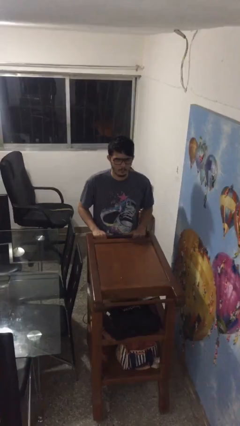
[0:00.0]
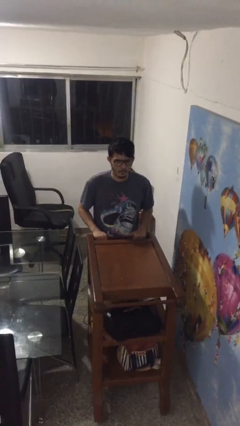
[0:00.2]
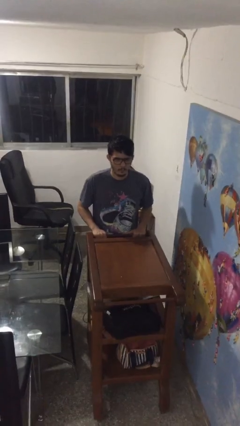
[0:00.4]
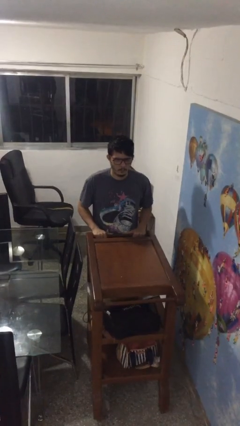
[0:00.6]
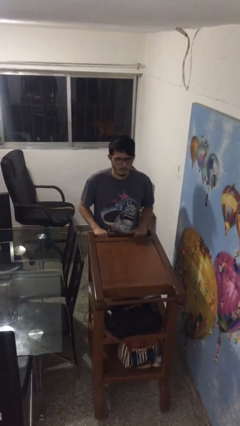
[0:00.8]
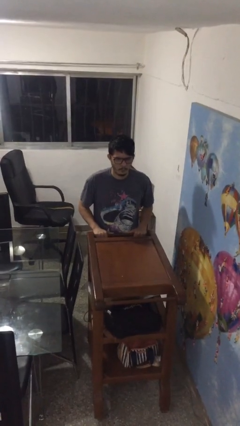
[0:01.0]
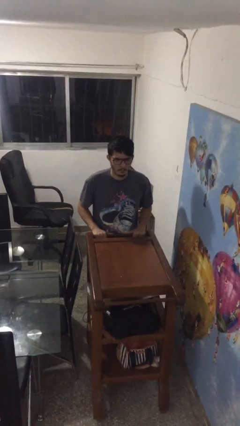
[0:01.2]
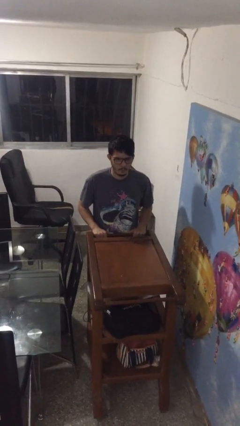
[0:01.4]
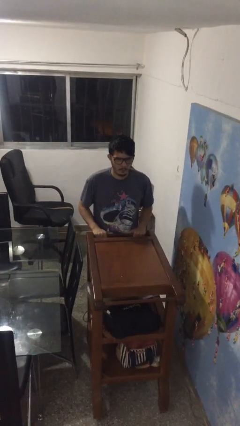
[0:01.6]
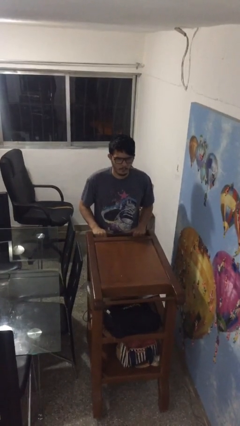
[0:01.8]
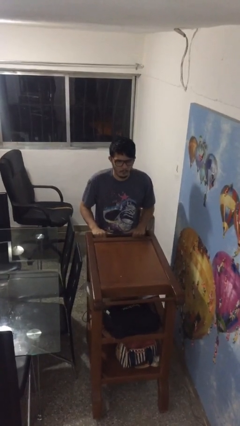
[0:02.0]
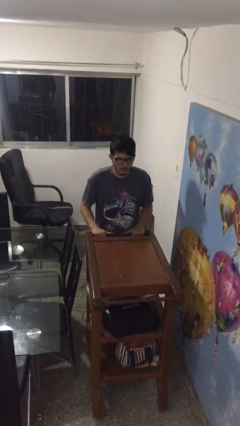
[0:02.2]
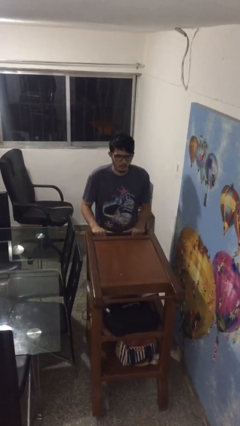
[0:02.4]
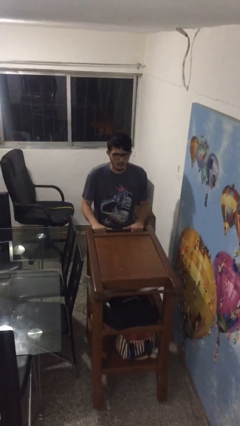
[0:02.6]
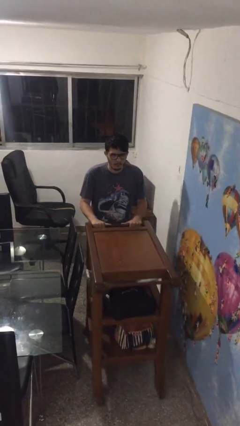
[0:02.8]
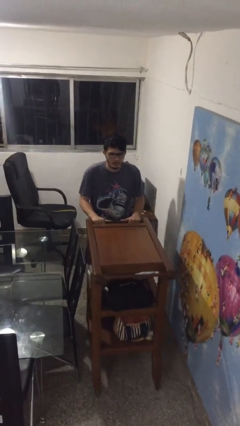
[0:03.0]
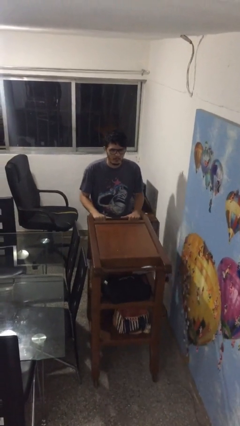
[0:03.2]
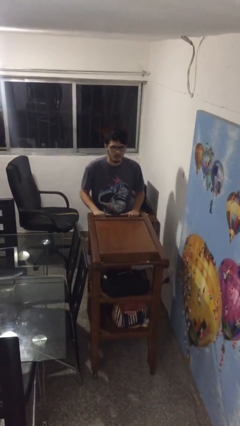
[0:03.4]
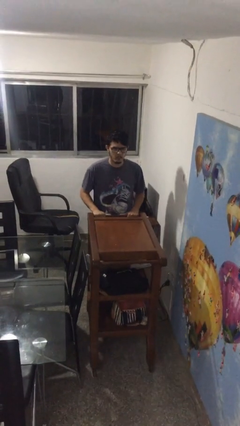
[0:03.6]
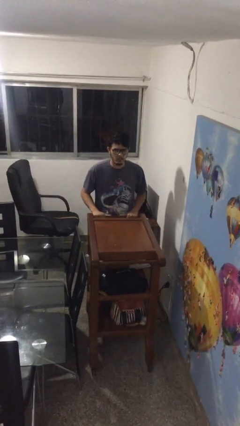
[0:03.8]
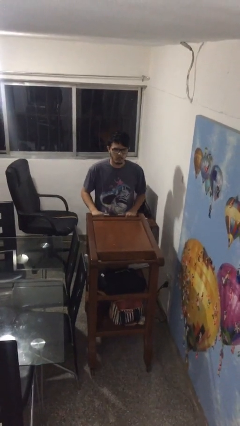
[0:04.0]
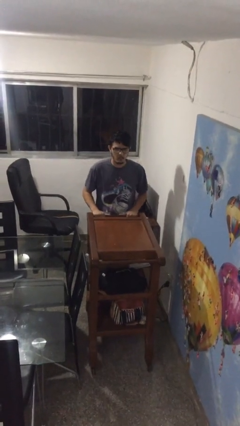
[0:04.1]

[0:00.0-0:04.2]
person pulls wheeled cart

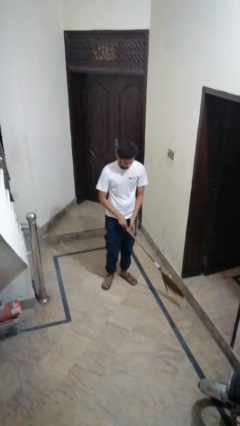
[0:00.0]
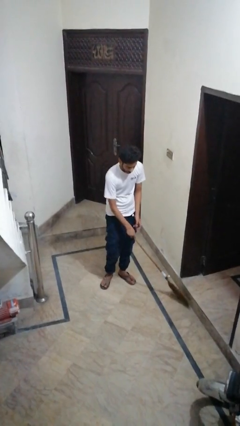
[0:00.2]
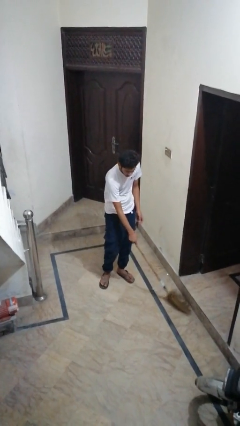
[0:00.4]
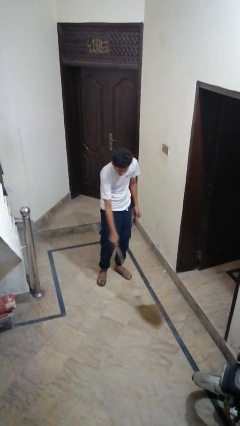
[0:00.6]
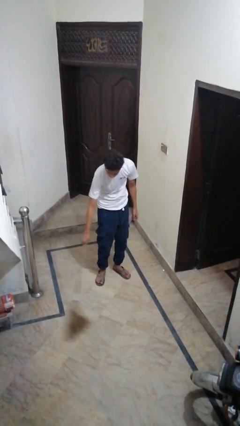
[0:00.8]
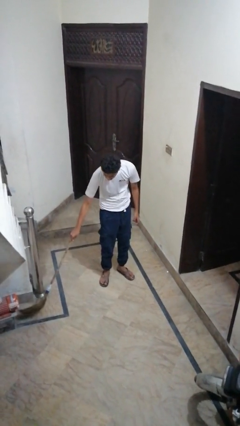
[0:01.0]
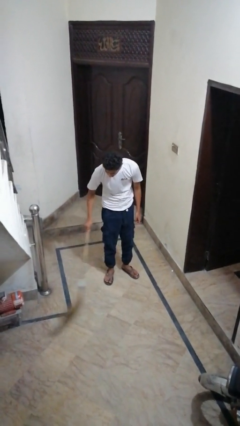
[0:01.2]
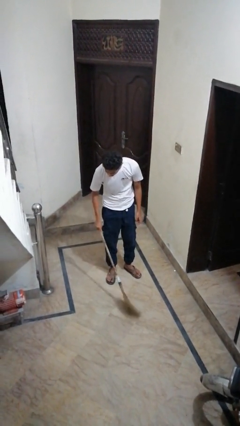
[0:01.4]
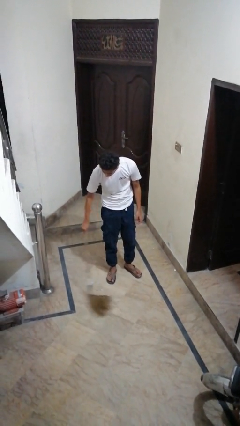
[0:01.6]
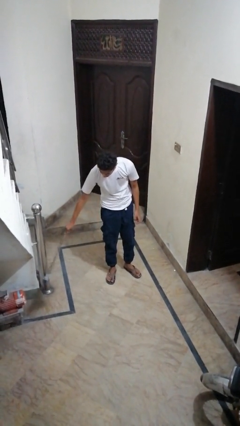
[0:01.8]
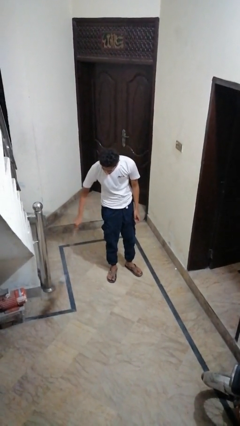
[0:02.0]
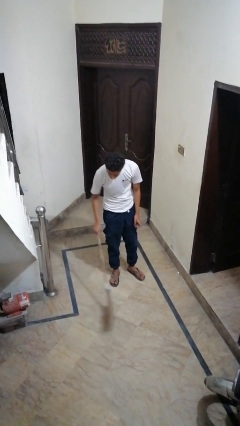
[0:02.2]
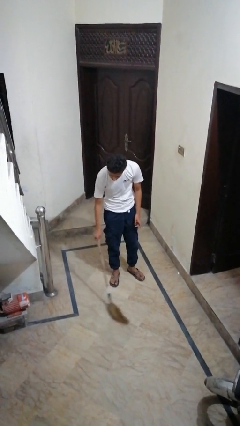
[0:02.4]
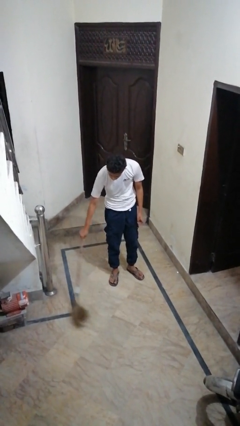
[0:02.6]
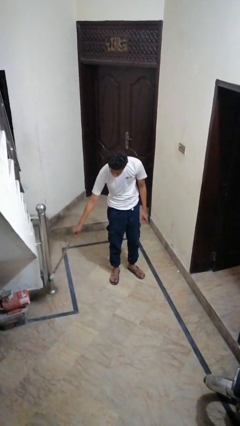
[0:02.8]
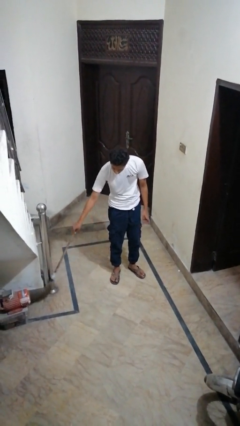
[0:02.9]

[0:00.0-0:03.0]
person sweeps floor

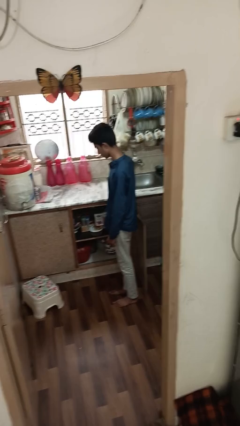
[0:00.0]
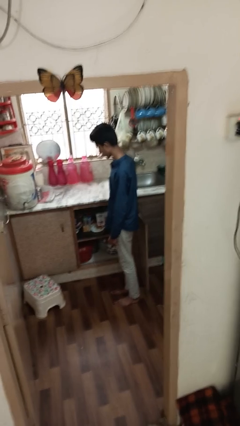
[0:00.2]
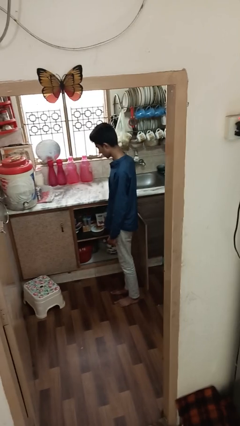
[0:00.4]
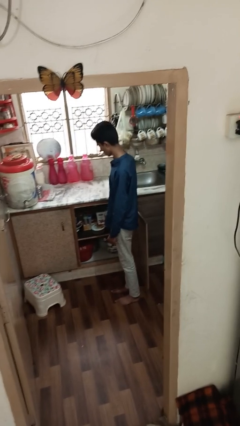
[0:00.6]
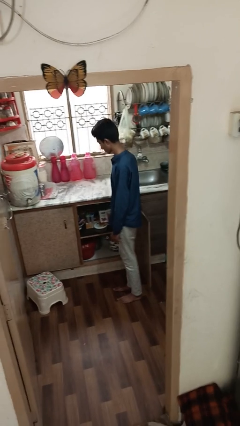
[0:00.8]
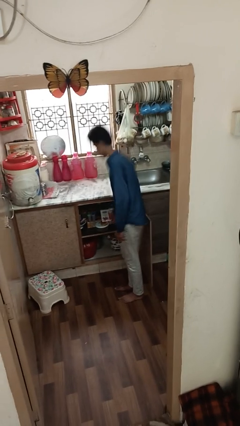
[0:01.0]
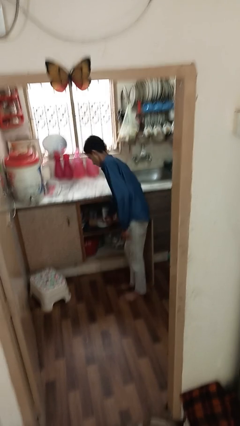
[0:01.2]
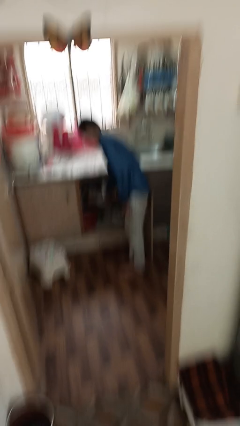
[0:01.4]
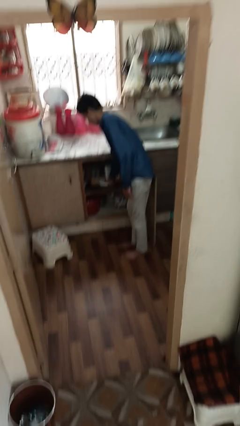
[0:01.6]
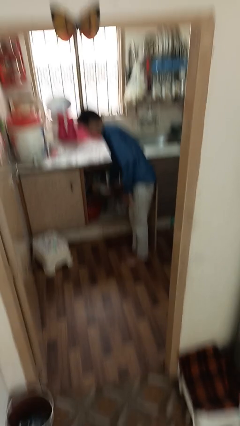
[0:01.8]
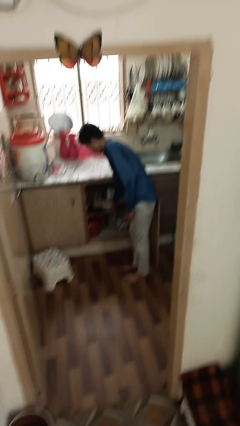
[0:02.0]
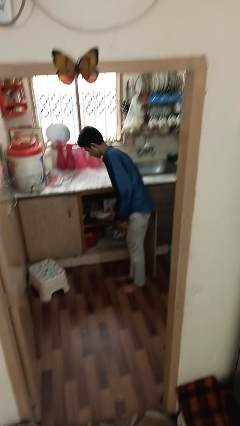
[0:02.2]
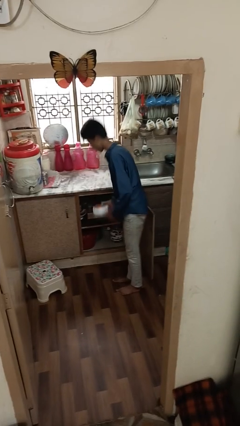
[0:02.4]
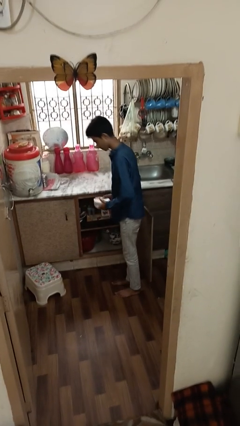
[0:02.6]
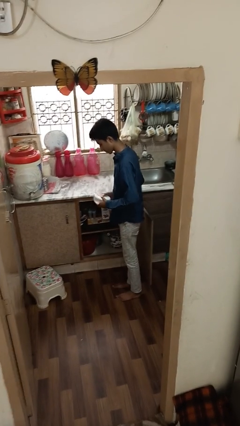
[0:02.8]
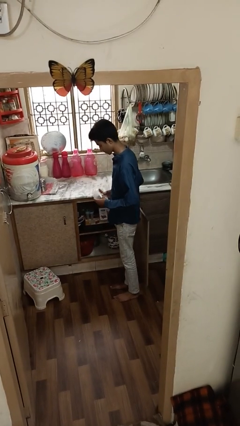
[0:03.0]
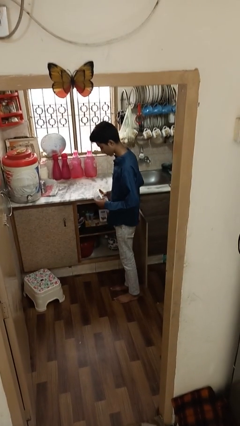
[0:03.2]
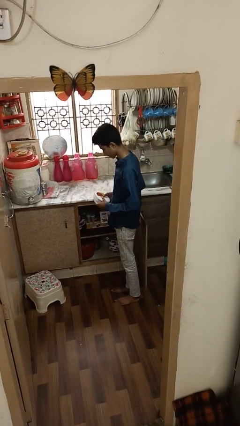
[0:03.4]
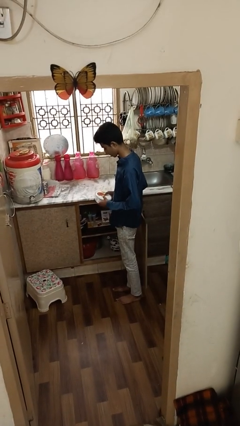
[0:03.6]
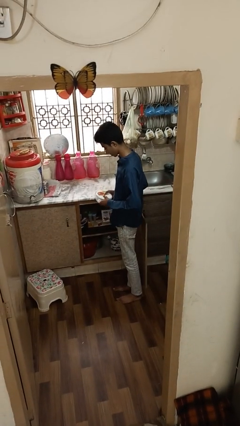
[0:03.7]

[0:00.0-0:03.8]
person picks up object from cabinet

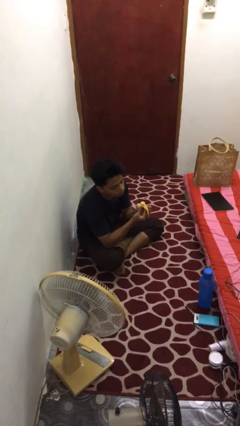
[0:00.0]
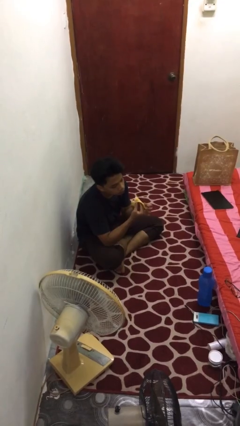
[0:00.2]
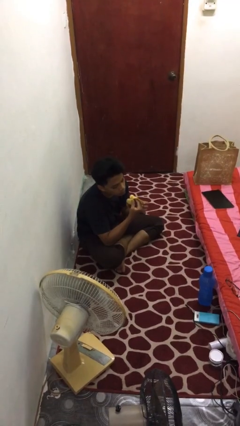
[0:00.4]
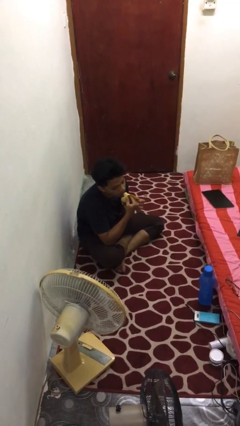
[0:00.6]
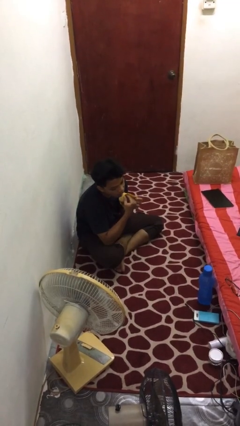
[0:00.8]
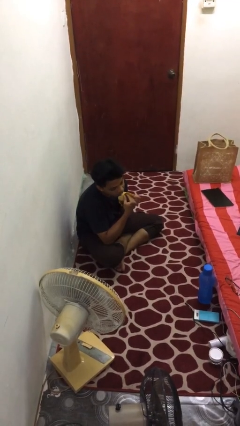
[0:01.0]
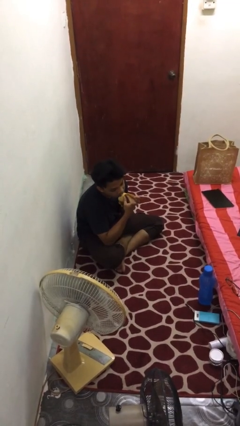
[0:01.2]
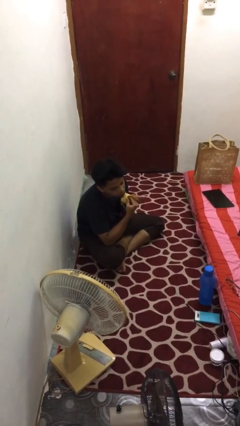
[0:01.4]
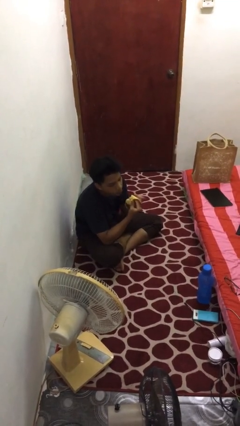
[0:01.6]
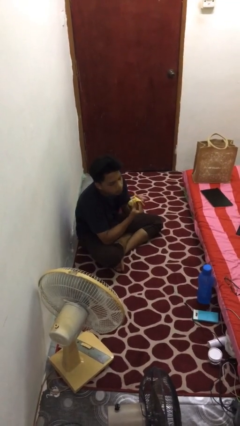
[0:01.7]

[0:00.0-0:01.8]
person eats banana

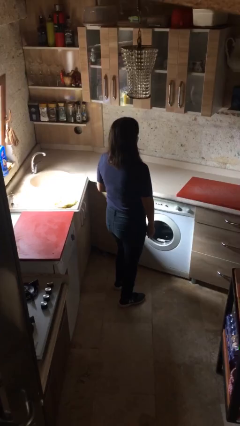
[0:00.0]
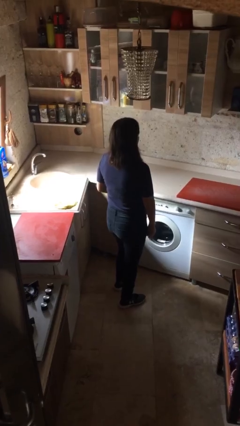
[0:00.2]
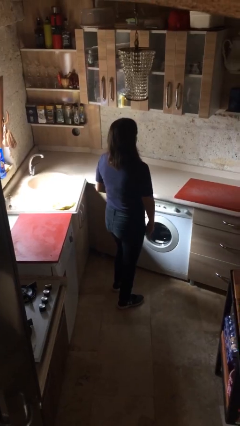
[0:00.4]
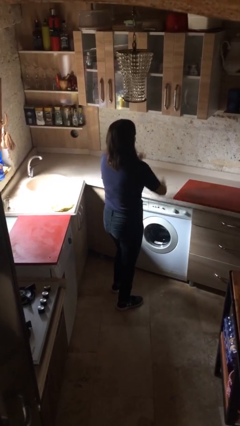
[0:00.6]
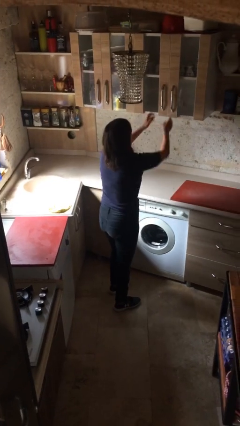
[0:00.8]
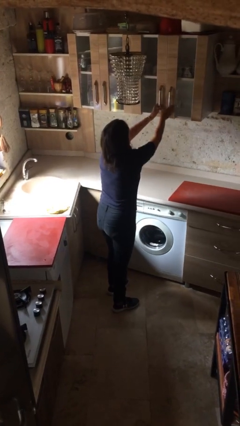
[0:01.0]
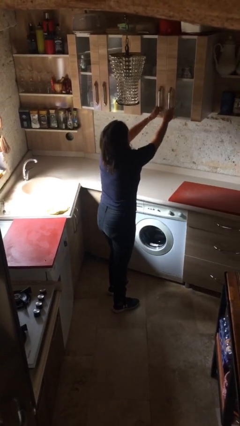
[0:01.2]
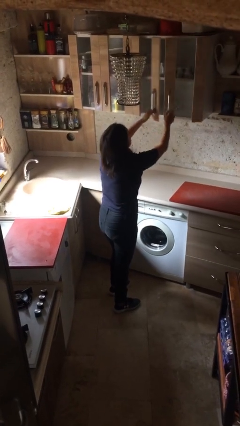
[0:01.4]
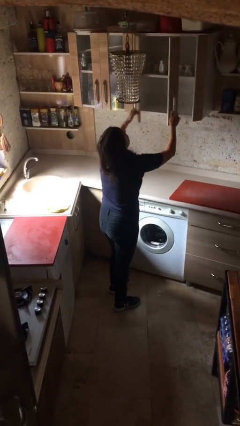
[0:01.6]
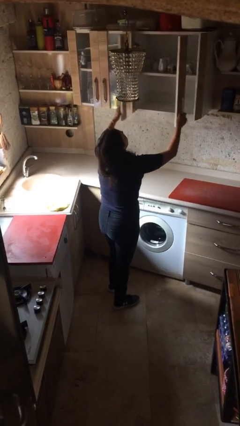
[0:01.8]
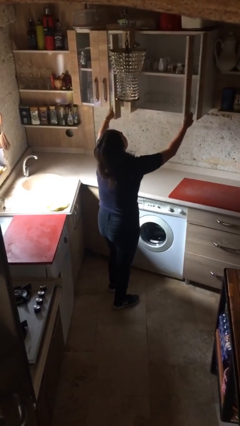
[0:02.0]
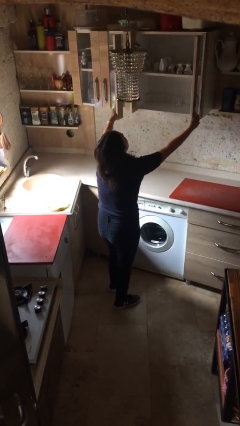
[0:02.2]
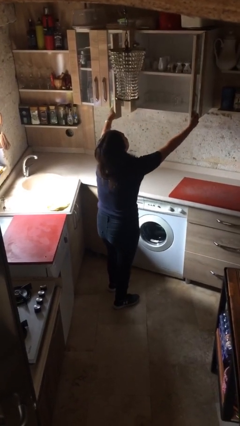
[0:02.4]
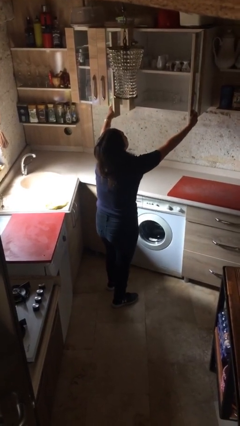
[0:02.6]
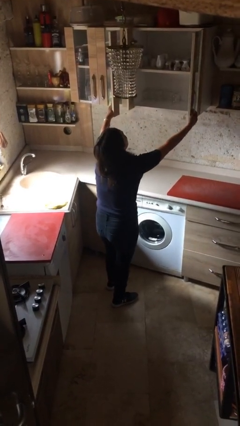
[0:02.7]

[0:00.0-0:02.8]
person opens cabinet

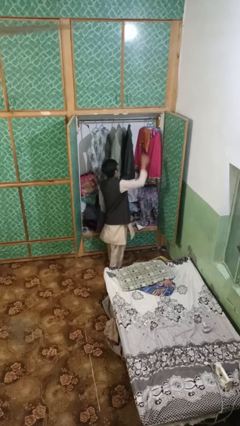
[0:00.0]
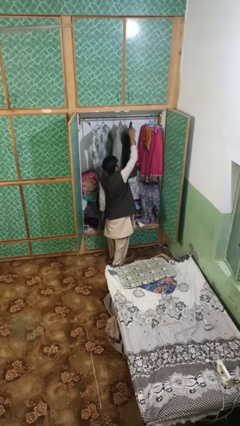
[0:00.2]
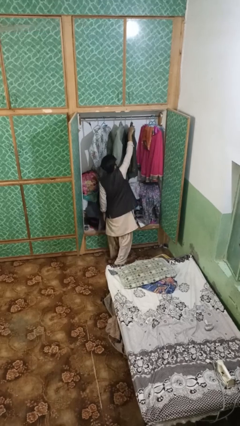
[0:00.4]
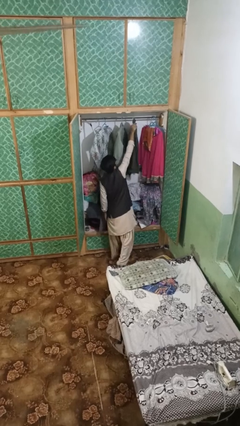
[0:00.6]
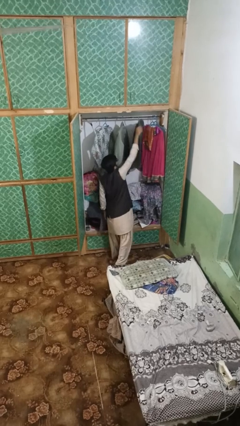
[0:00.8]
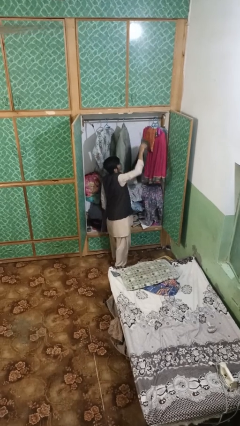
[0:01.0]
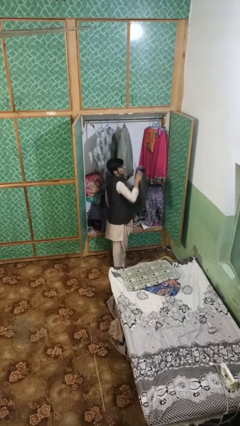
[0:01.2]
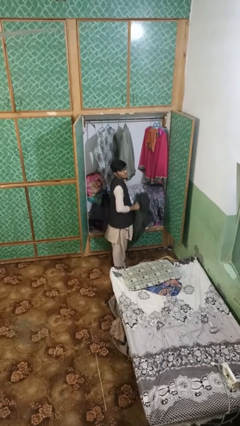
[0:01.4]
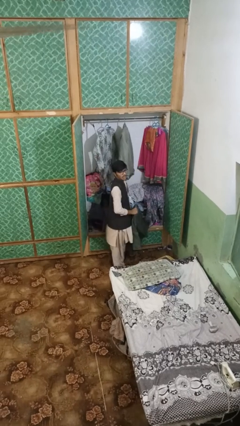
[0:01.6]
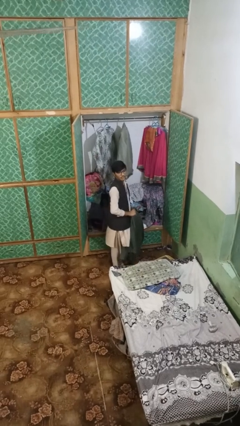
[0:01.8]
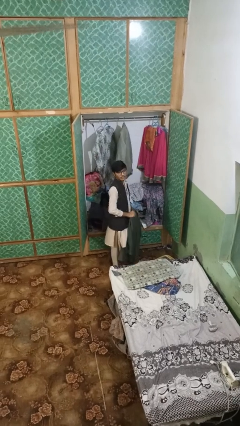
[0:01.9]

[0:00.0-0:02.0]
person takes clothes from closet
